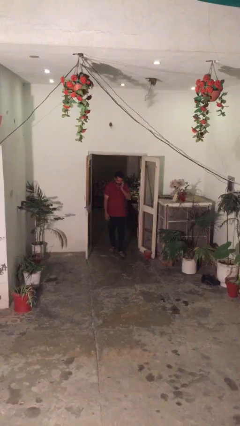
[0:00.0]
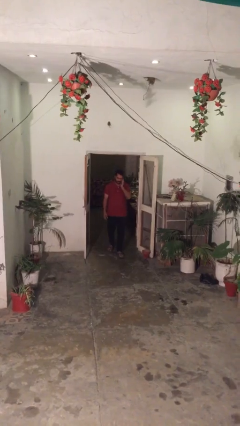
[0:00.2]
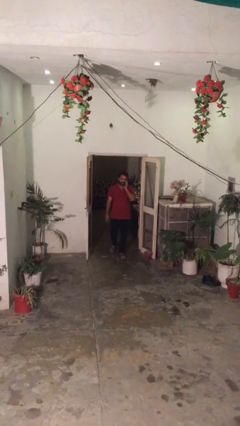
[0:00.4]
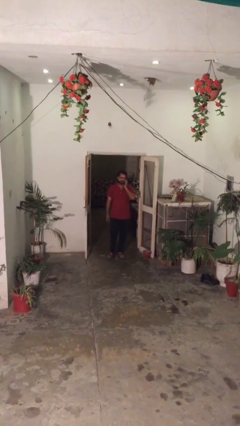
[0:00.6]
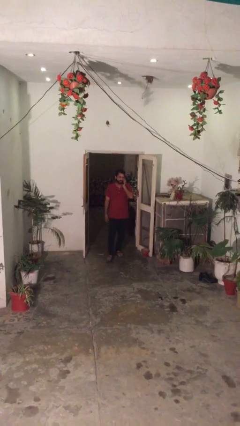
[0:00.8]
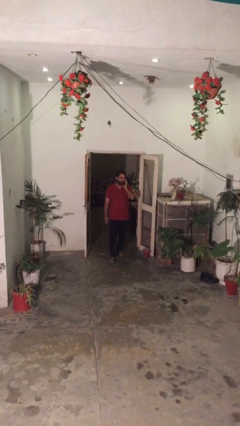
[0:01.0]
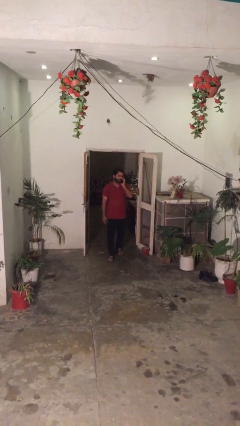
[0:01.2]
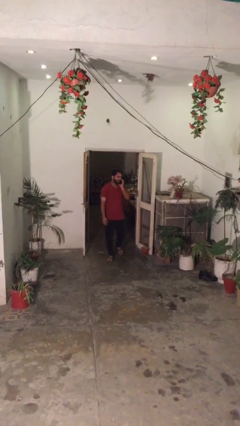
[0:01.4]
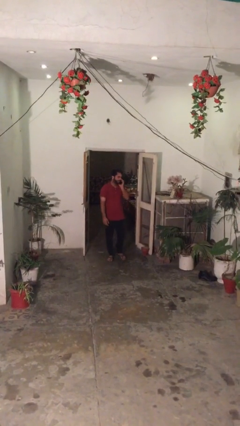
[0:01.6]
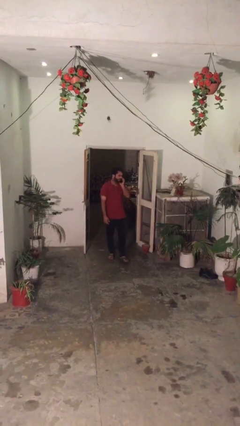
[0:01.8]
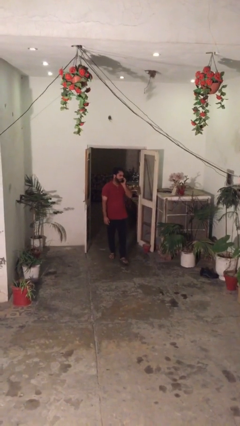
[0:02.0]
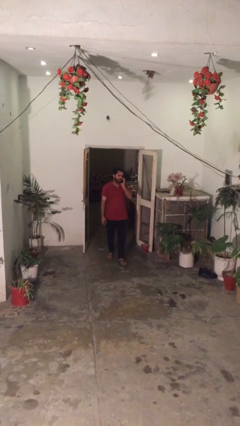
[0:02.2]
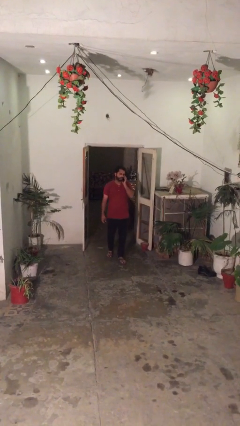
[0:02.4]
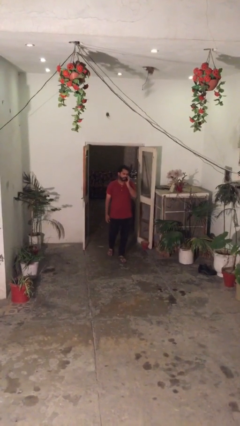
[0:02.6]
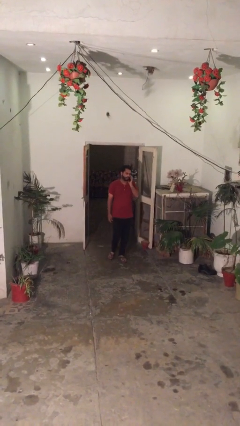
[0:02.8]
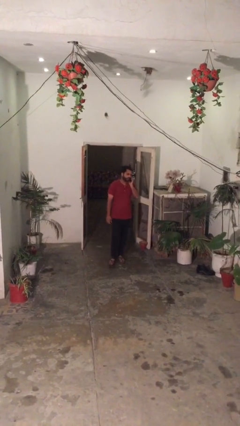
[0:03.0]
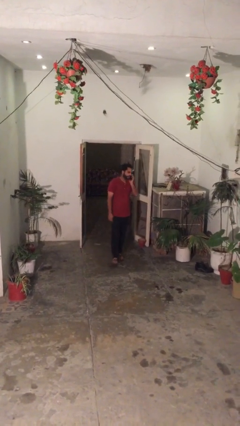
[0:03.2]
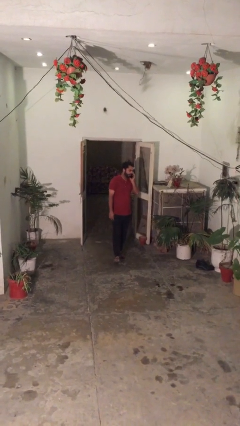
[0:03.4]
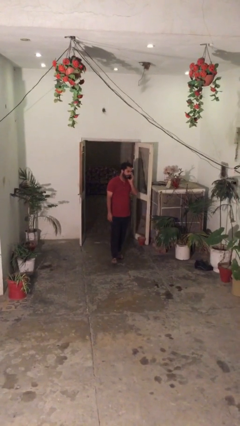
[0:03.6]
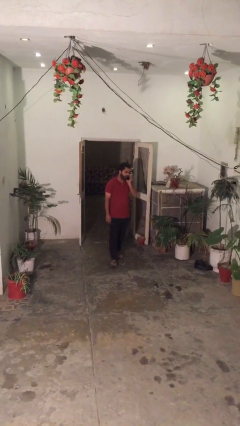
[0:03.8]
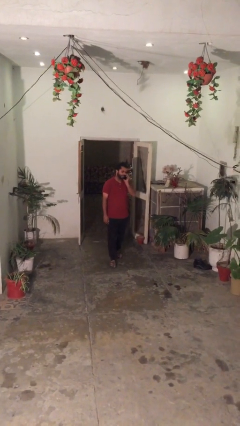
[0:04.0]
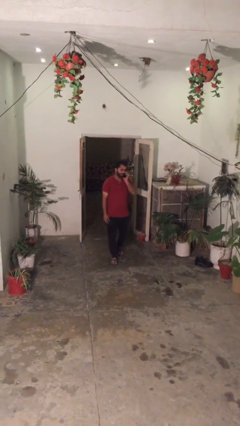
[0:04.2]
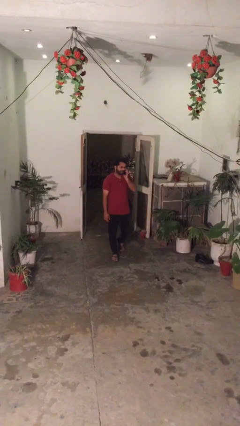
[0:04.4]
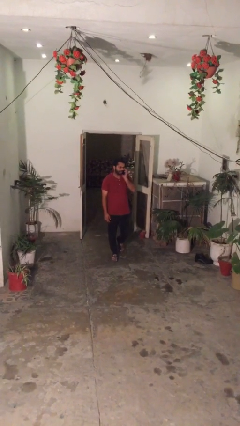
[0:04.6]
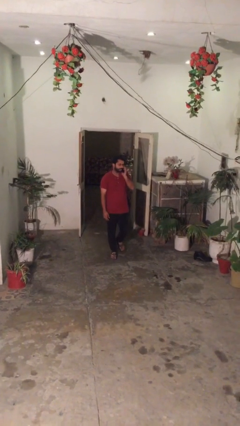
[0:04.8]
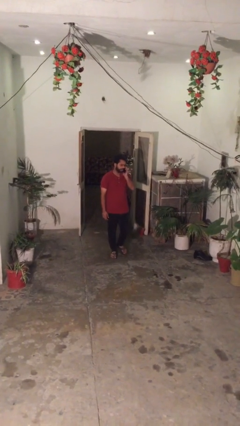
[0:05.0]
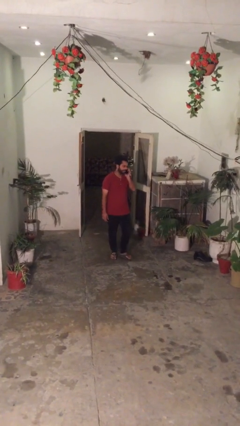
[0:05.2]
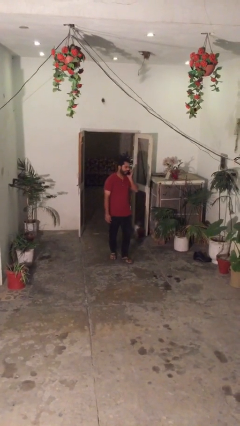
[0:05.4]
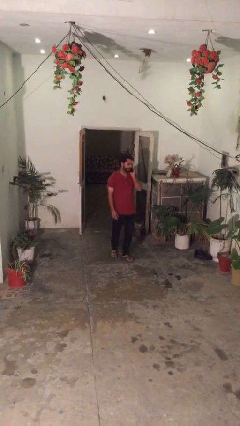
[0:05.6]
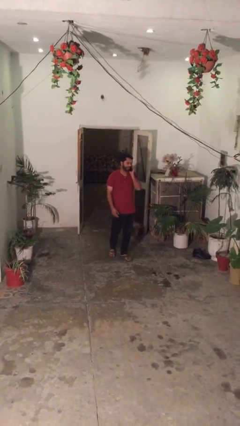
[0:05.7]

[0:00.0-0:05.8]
person enters scene through structure

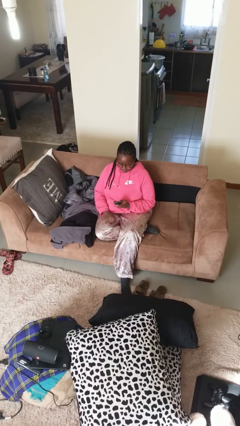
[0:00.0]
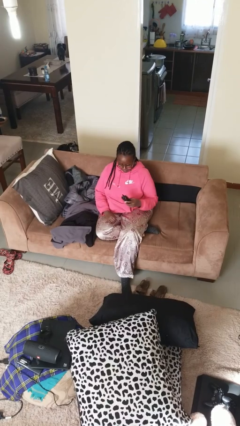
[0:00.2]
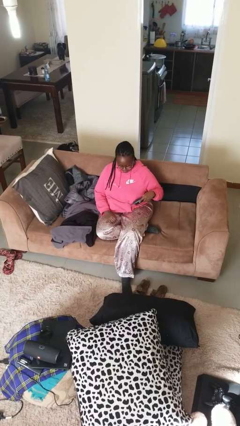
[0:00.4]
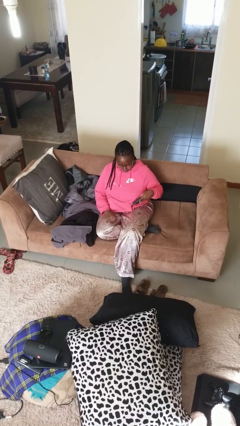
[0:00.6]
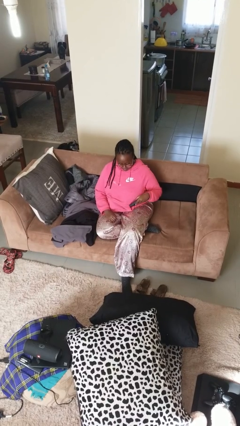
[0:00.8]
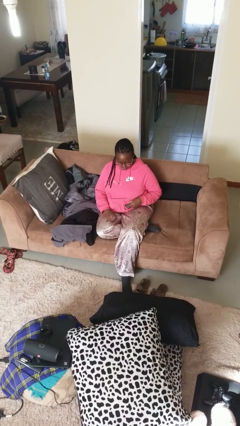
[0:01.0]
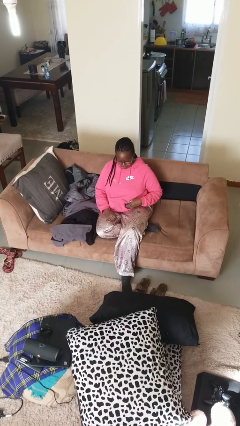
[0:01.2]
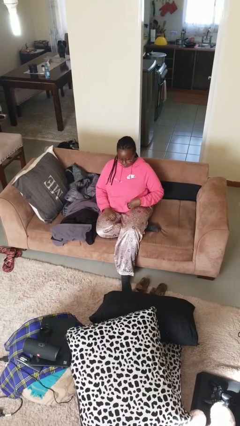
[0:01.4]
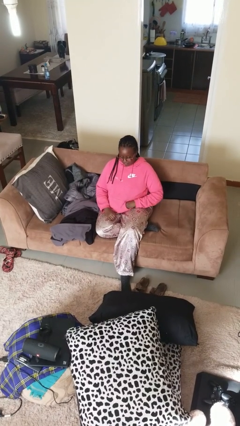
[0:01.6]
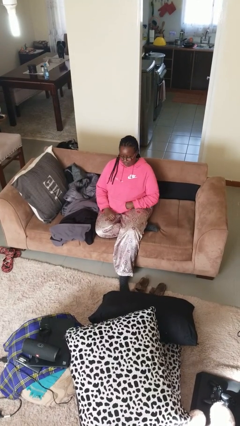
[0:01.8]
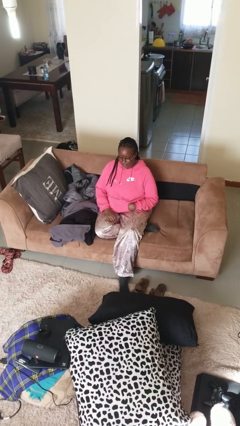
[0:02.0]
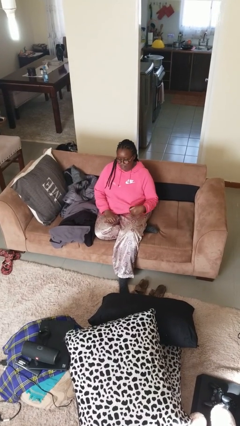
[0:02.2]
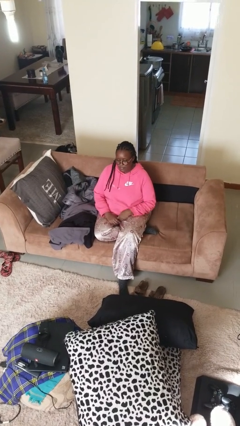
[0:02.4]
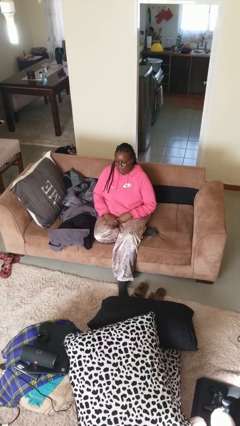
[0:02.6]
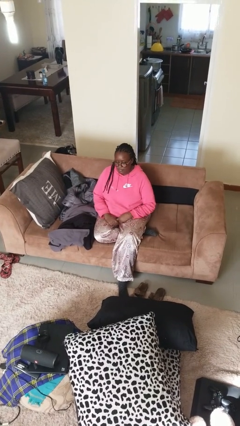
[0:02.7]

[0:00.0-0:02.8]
person puts phone into pocket

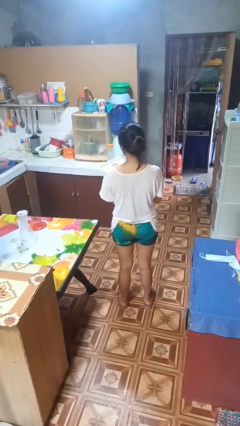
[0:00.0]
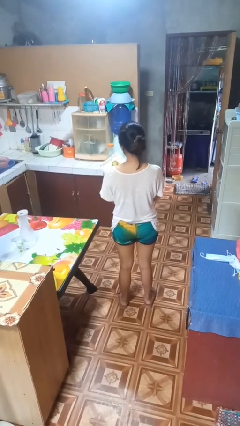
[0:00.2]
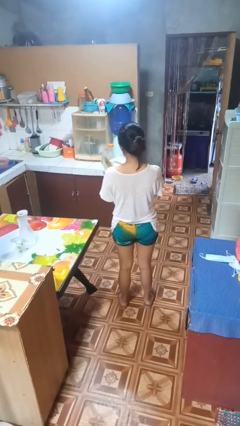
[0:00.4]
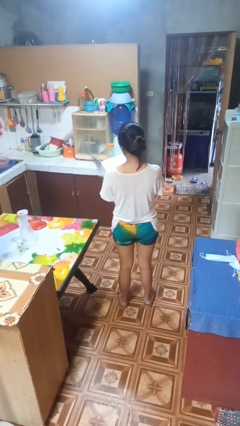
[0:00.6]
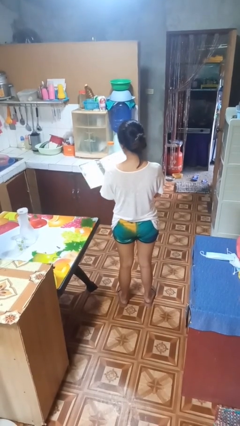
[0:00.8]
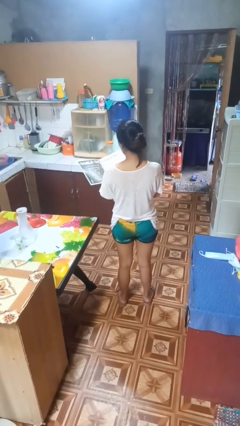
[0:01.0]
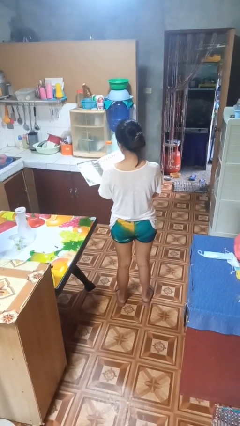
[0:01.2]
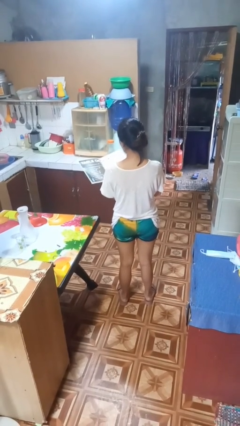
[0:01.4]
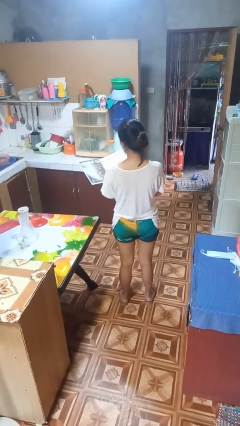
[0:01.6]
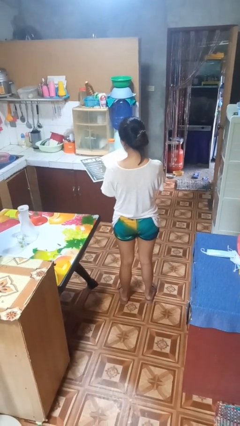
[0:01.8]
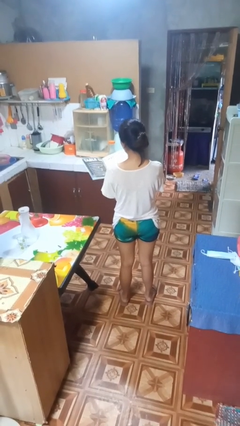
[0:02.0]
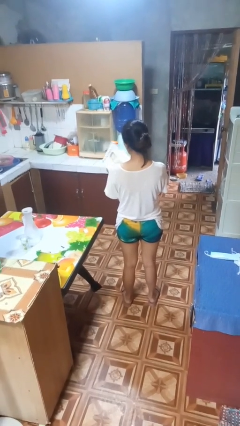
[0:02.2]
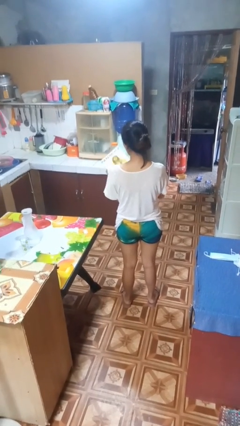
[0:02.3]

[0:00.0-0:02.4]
person reads magazine

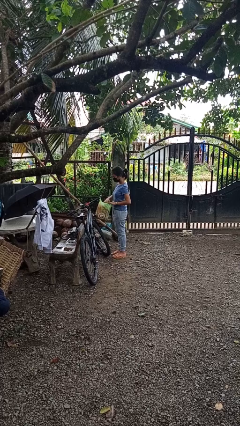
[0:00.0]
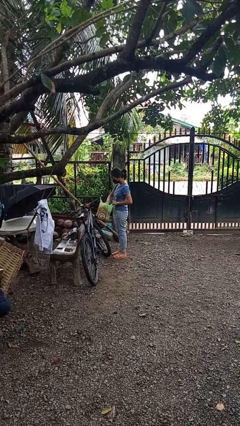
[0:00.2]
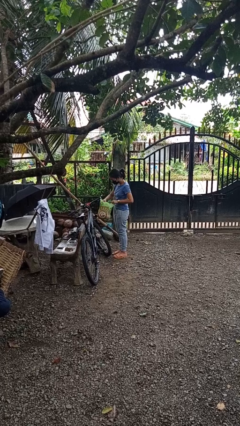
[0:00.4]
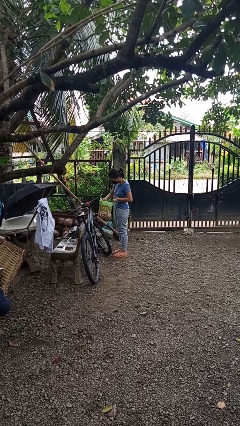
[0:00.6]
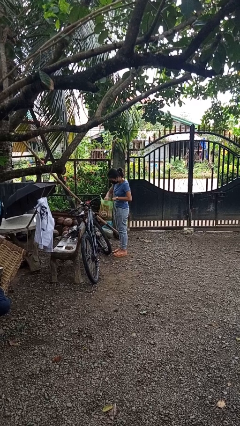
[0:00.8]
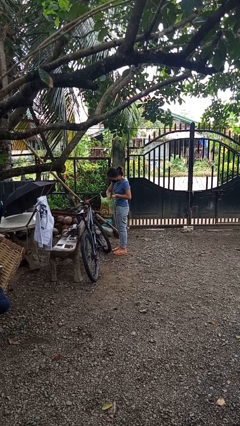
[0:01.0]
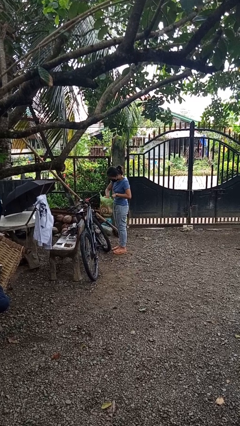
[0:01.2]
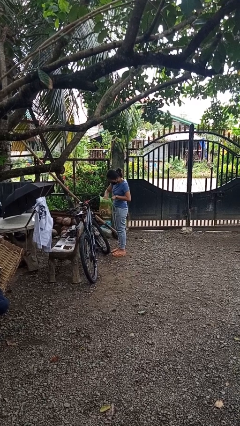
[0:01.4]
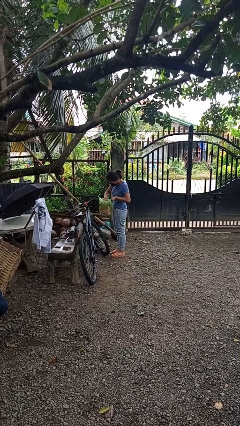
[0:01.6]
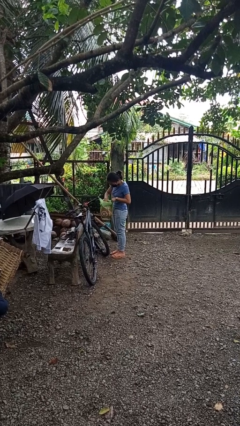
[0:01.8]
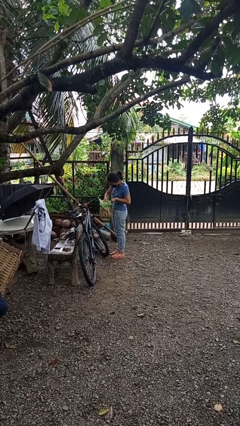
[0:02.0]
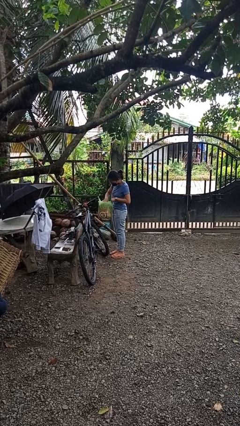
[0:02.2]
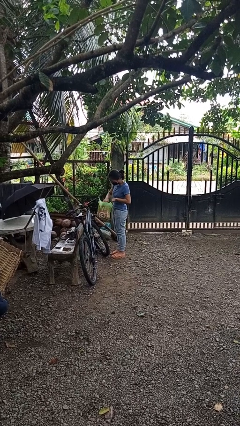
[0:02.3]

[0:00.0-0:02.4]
person searches in bag

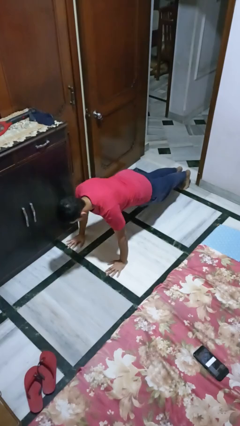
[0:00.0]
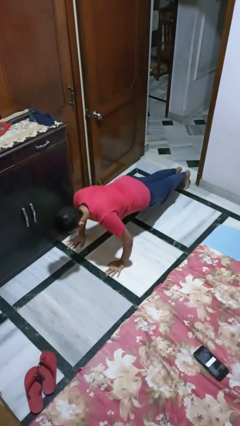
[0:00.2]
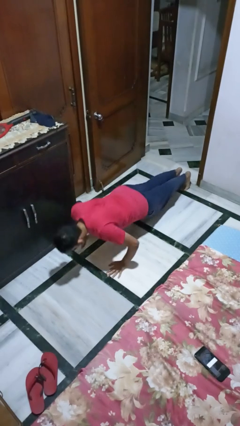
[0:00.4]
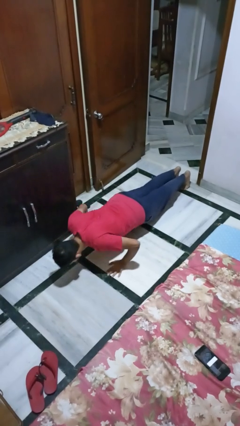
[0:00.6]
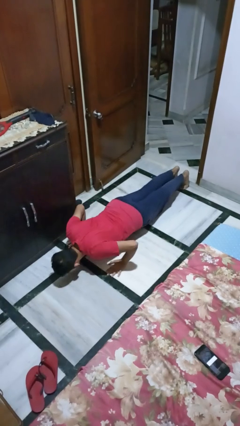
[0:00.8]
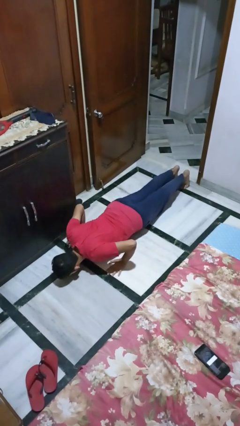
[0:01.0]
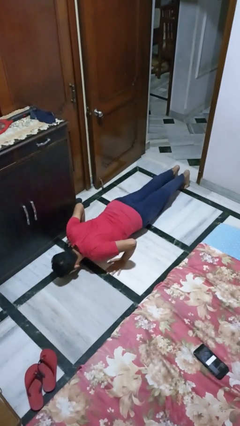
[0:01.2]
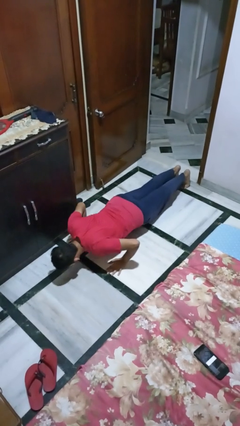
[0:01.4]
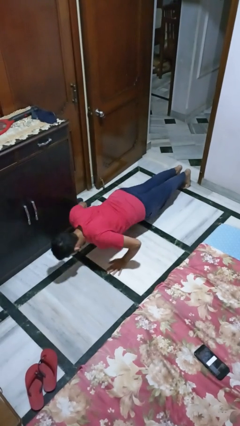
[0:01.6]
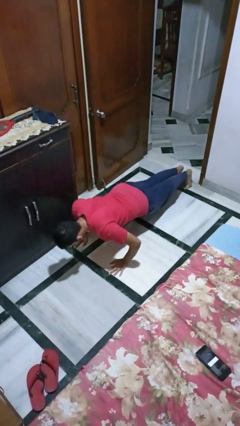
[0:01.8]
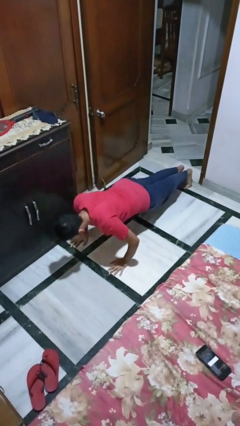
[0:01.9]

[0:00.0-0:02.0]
person exercises with pushup

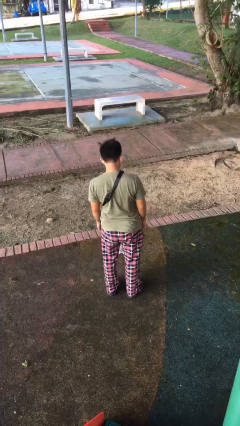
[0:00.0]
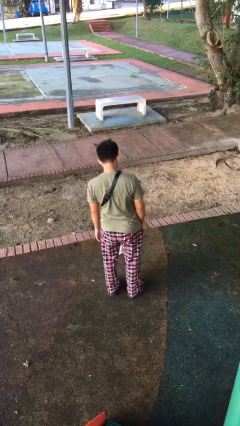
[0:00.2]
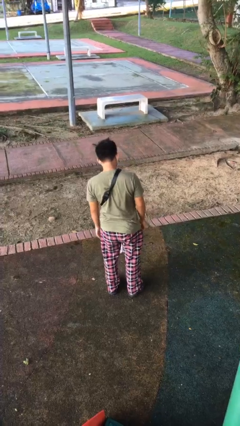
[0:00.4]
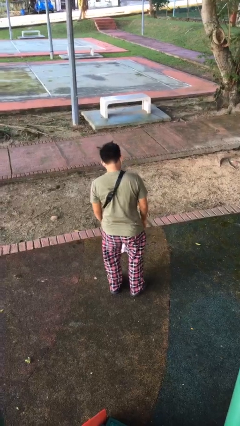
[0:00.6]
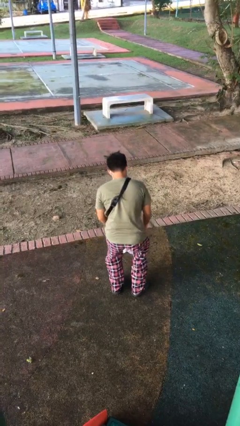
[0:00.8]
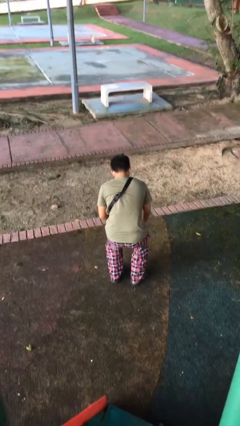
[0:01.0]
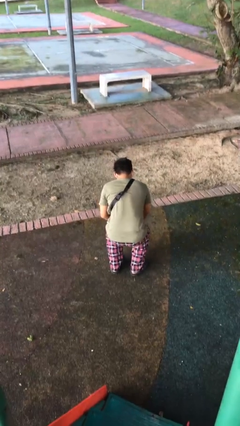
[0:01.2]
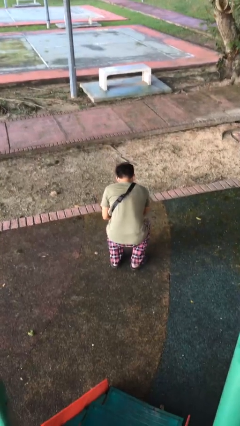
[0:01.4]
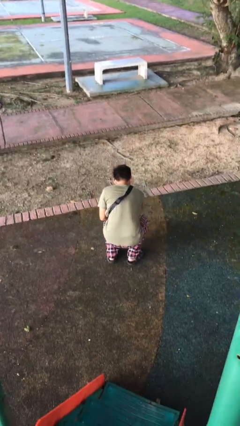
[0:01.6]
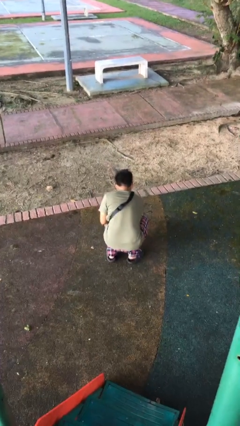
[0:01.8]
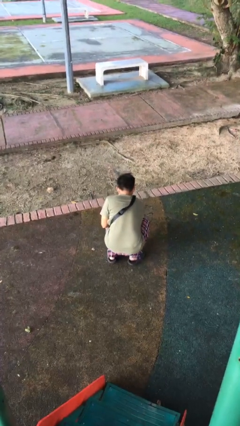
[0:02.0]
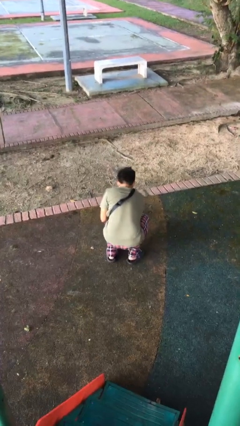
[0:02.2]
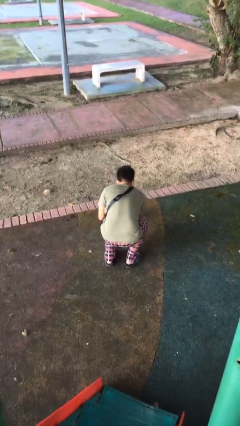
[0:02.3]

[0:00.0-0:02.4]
person picks up object from floor
